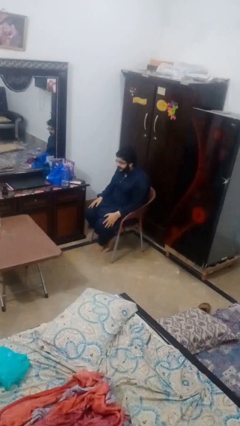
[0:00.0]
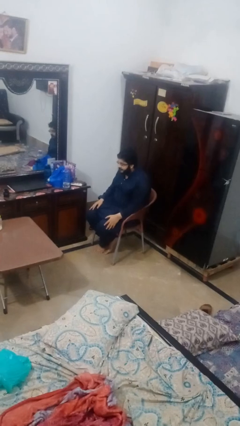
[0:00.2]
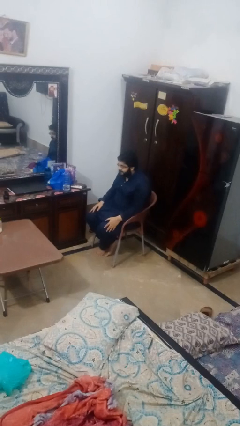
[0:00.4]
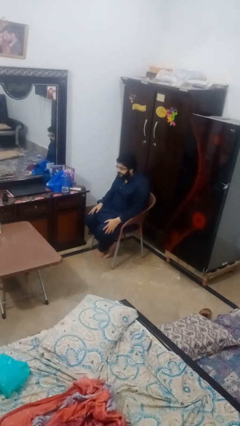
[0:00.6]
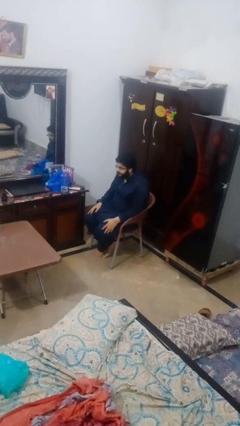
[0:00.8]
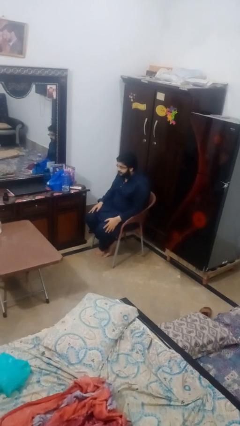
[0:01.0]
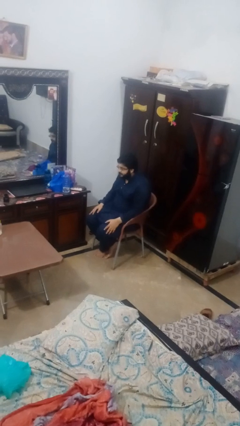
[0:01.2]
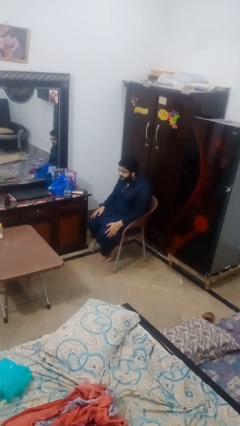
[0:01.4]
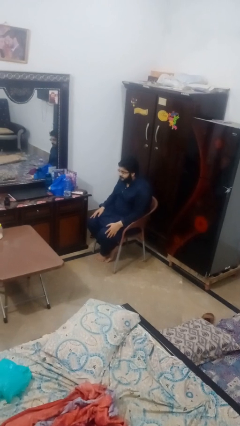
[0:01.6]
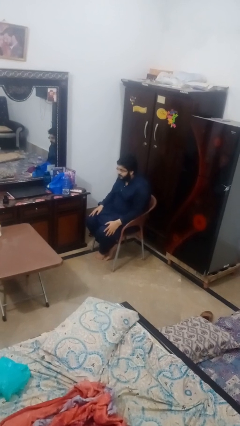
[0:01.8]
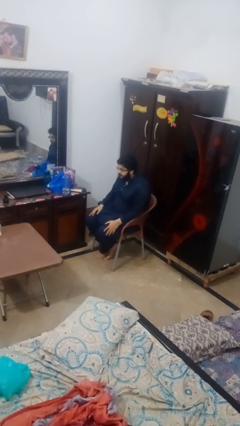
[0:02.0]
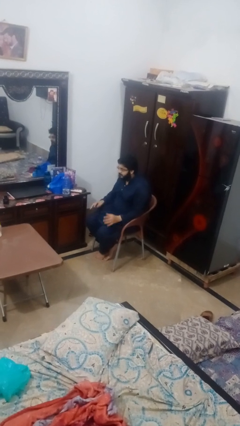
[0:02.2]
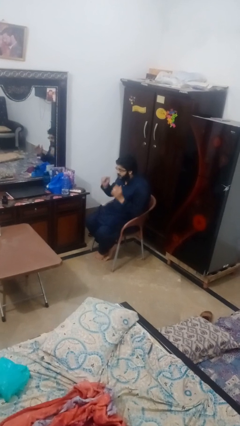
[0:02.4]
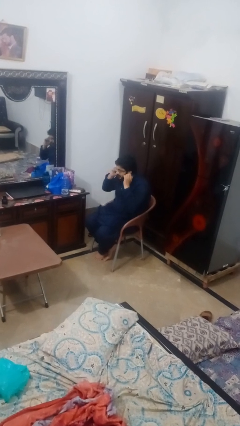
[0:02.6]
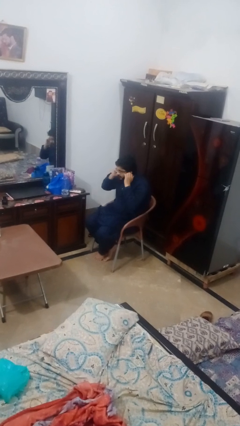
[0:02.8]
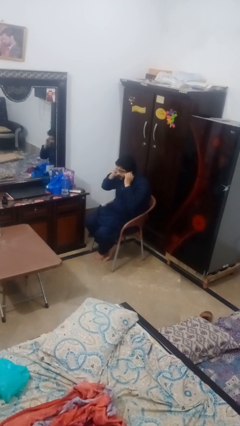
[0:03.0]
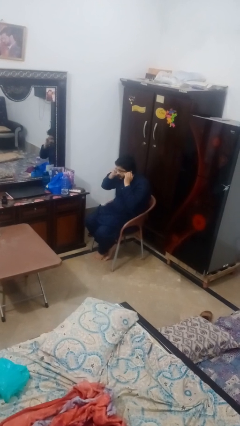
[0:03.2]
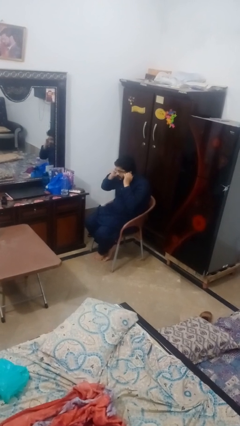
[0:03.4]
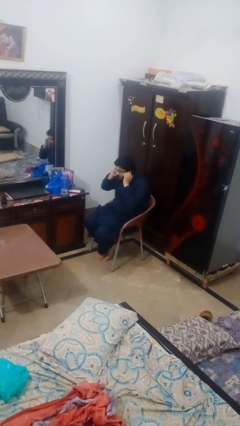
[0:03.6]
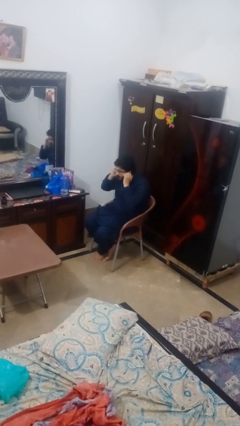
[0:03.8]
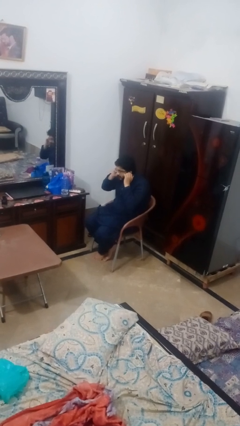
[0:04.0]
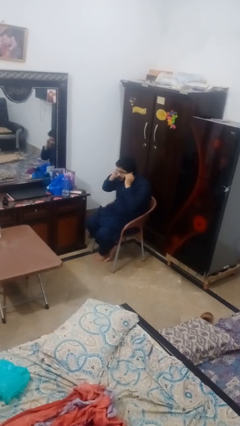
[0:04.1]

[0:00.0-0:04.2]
person puts fingers in ear

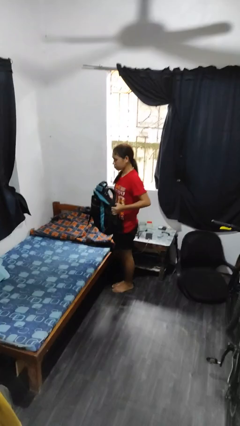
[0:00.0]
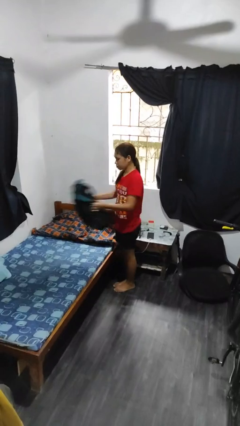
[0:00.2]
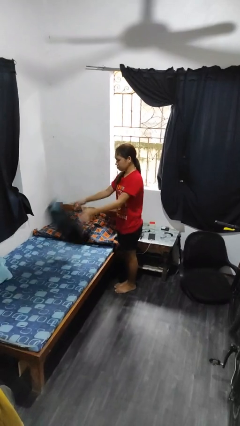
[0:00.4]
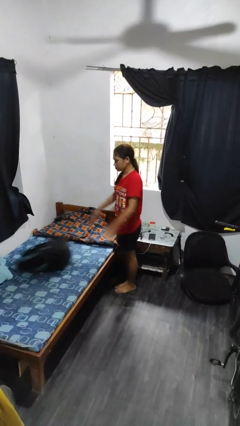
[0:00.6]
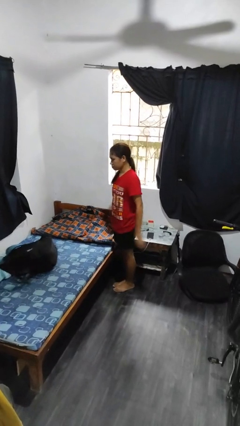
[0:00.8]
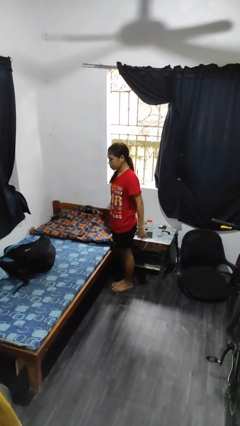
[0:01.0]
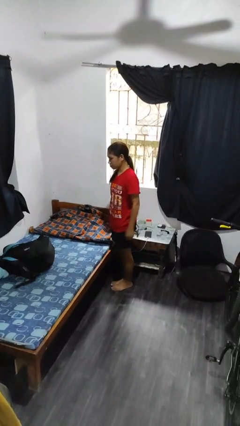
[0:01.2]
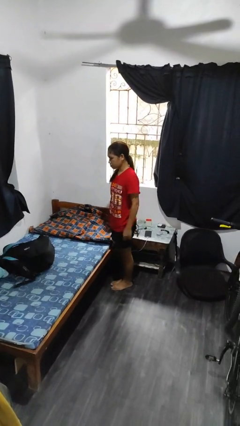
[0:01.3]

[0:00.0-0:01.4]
person throws object on bed

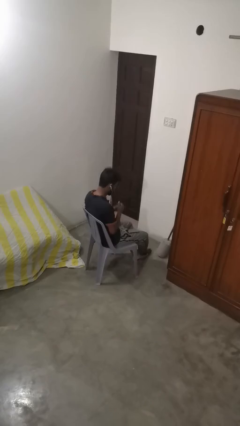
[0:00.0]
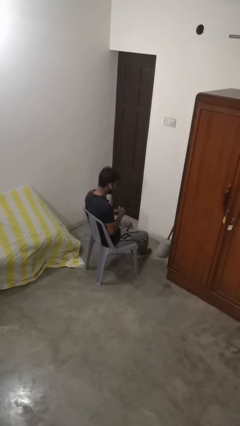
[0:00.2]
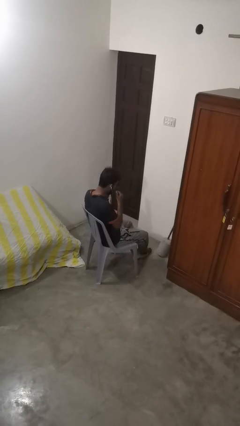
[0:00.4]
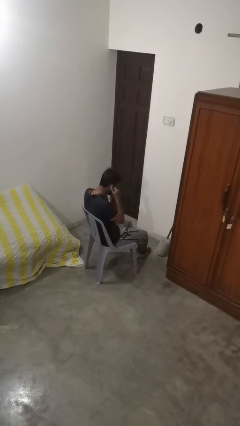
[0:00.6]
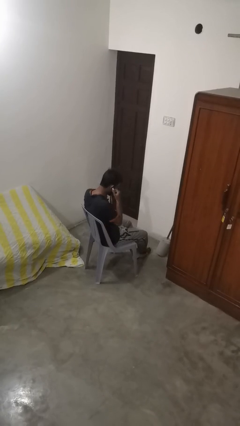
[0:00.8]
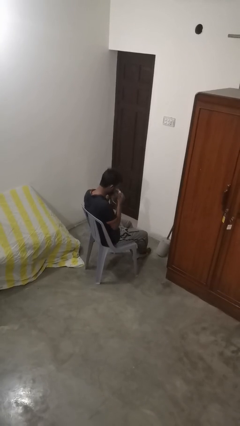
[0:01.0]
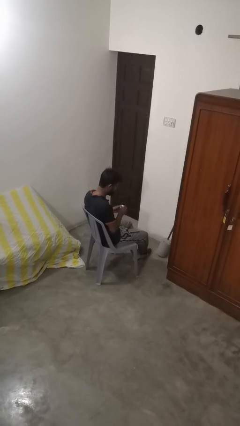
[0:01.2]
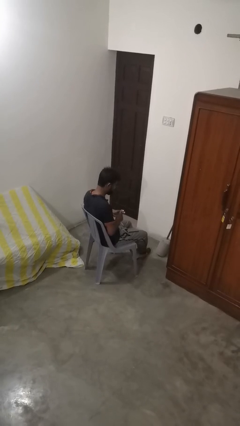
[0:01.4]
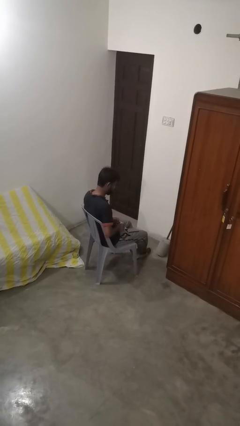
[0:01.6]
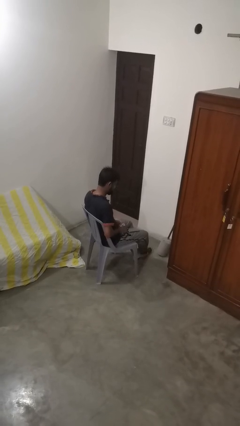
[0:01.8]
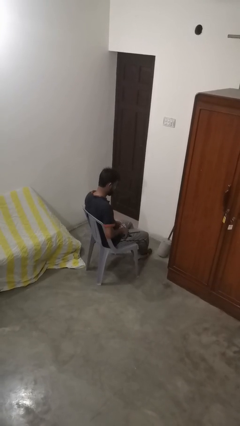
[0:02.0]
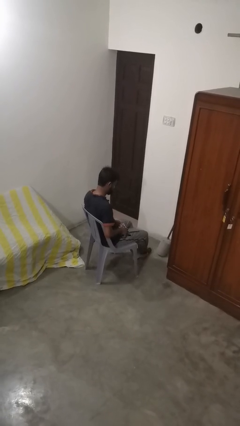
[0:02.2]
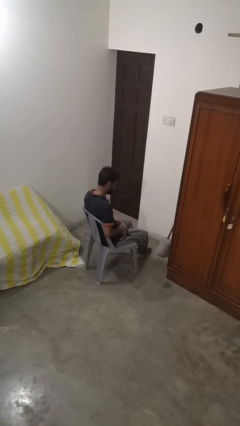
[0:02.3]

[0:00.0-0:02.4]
person takes off headphones

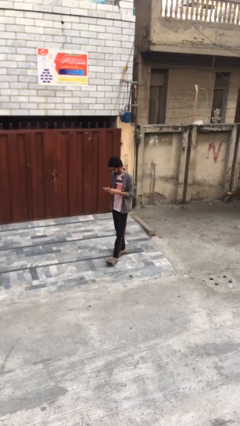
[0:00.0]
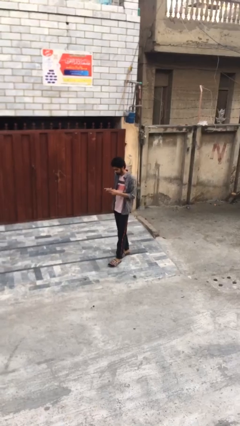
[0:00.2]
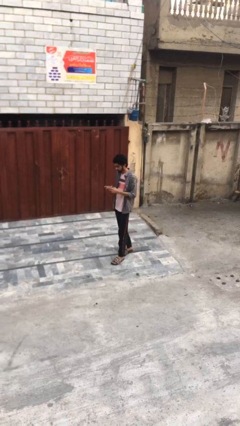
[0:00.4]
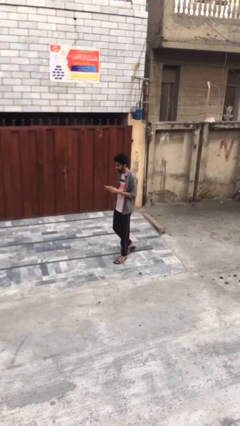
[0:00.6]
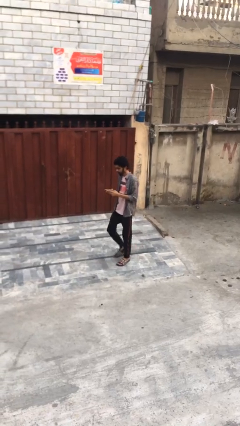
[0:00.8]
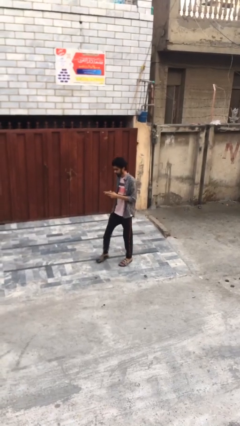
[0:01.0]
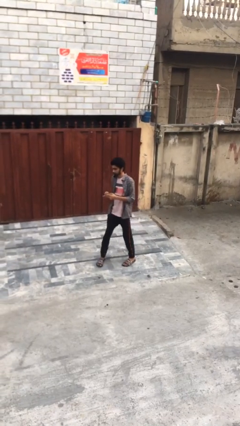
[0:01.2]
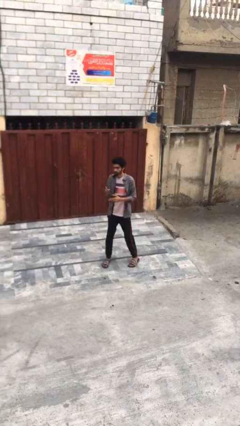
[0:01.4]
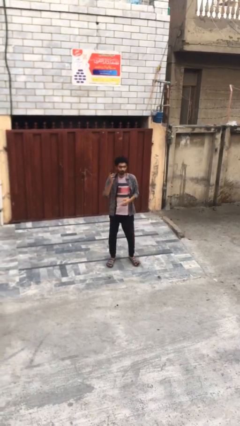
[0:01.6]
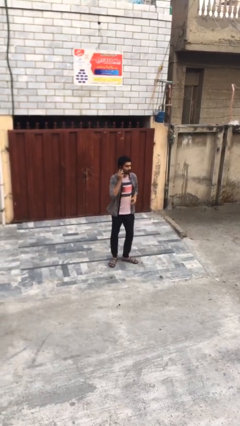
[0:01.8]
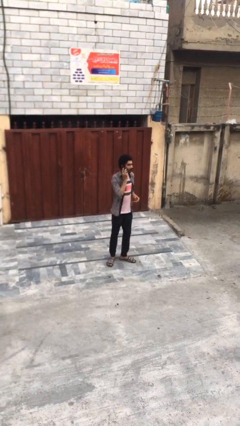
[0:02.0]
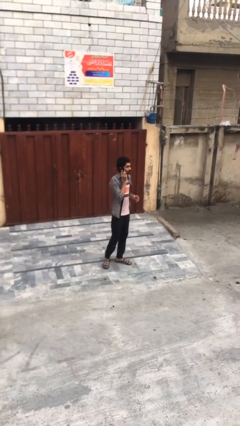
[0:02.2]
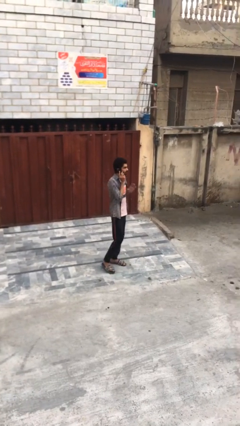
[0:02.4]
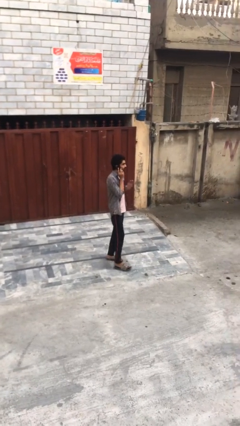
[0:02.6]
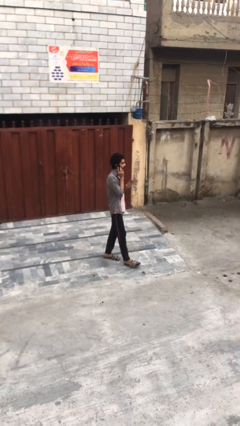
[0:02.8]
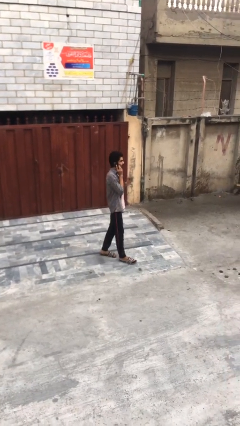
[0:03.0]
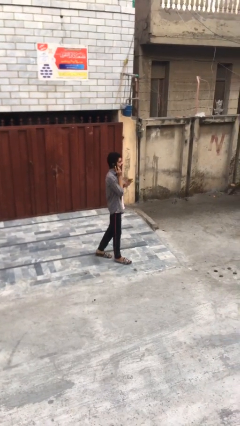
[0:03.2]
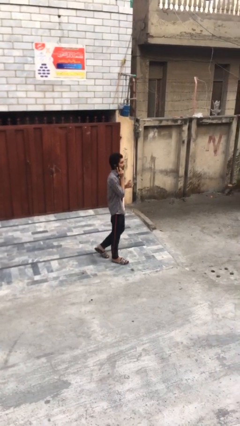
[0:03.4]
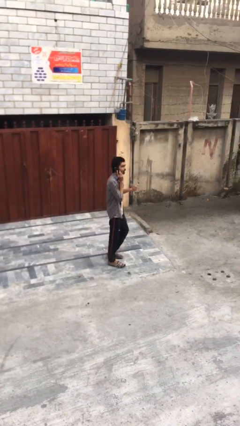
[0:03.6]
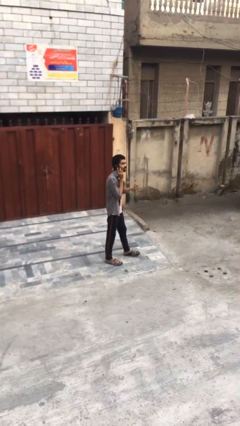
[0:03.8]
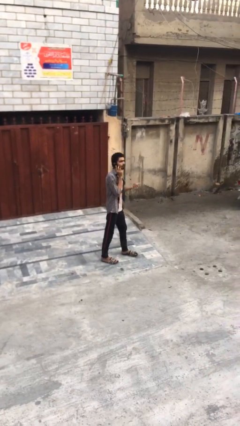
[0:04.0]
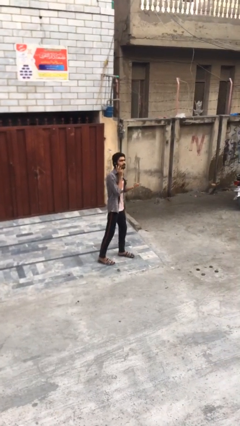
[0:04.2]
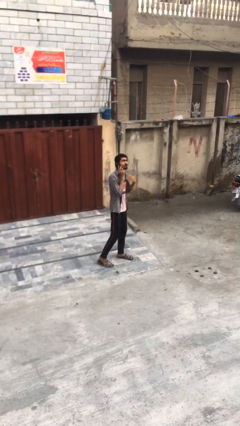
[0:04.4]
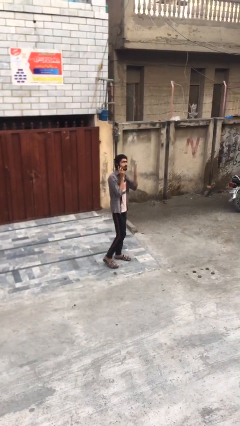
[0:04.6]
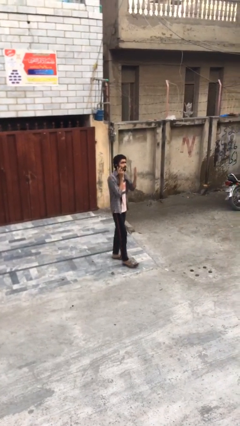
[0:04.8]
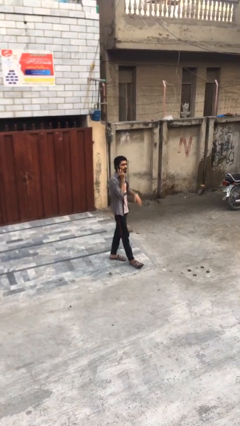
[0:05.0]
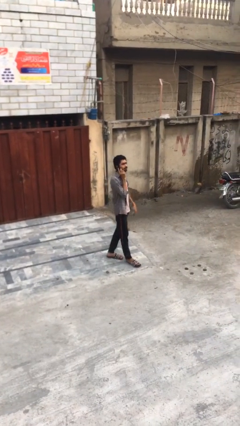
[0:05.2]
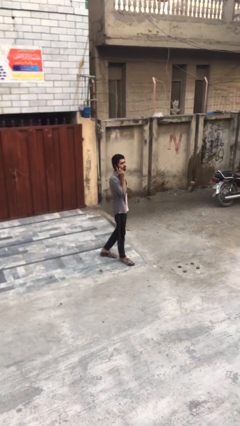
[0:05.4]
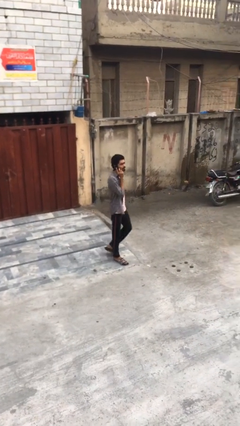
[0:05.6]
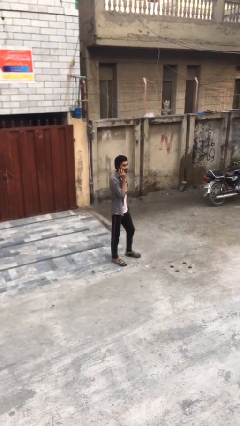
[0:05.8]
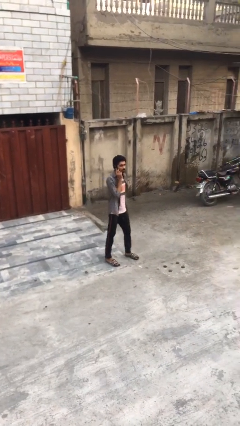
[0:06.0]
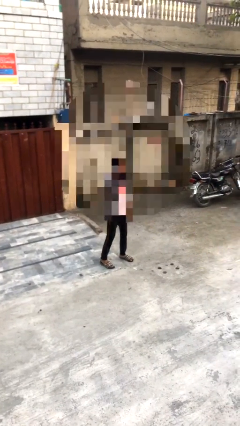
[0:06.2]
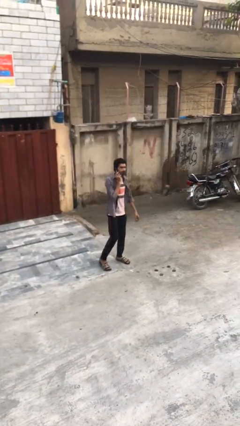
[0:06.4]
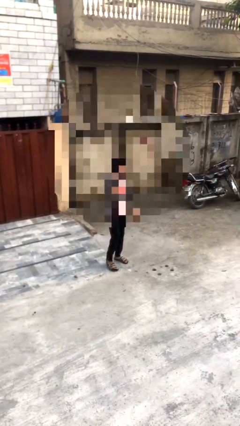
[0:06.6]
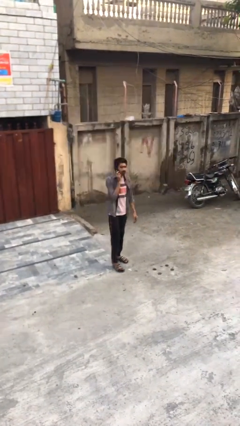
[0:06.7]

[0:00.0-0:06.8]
person talks on phone

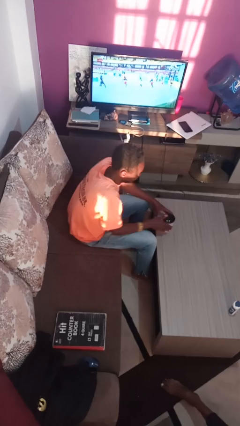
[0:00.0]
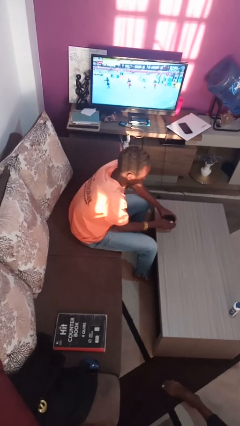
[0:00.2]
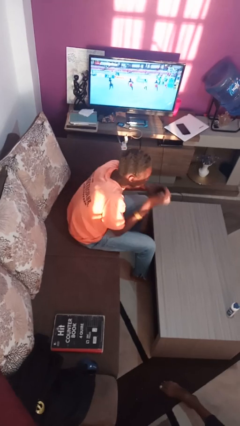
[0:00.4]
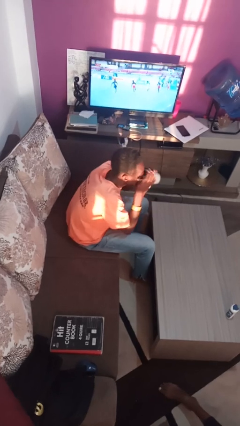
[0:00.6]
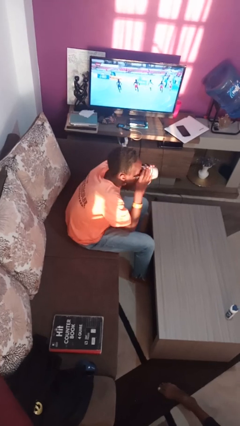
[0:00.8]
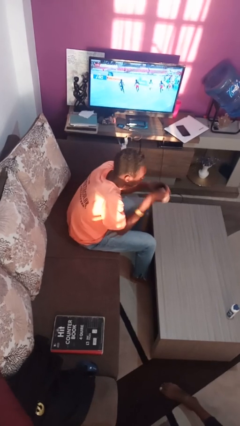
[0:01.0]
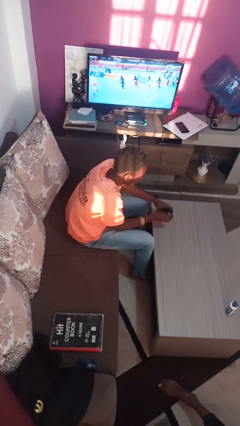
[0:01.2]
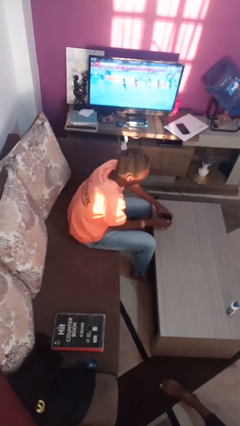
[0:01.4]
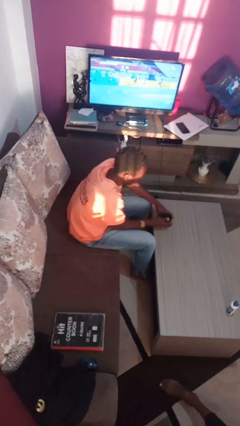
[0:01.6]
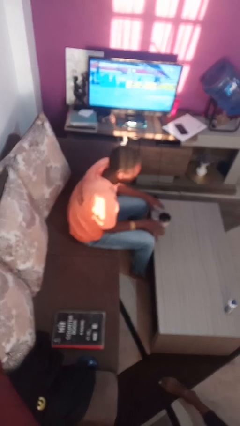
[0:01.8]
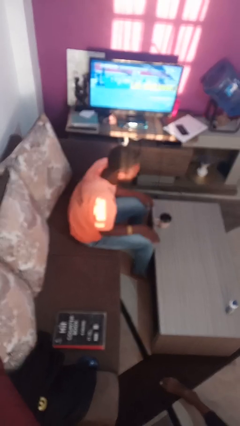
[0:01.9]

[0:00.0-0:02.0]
person drinks from mug

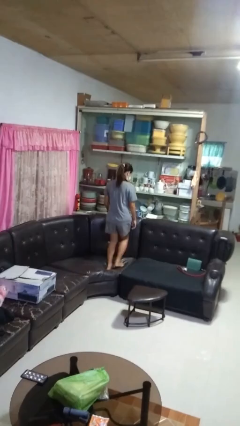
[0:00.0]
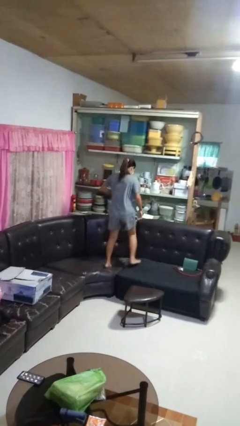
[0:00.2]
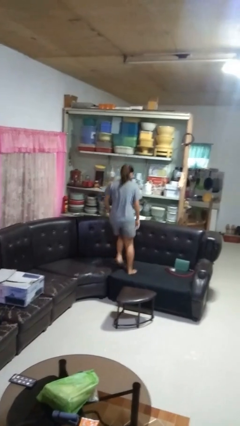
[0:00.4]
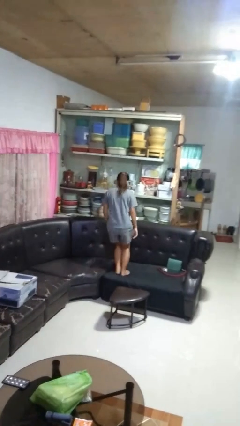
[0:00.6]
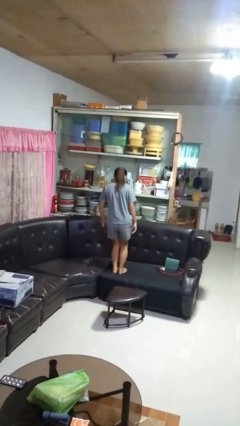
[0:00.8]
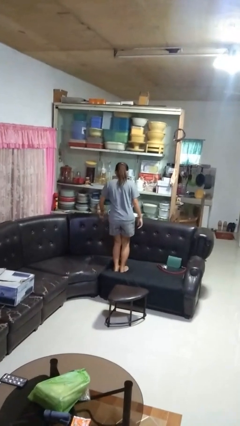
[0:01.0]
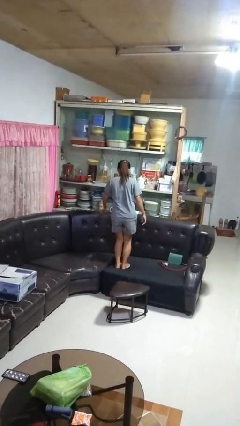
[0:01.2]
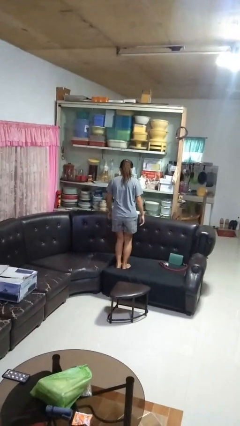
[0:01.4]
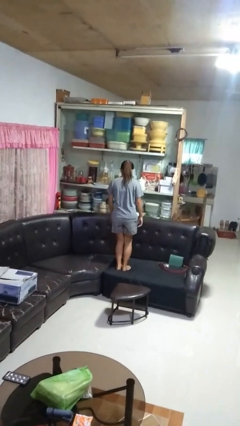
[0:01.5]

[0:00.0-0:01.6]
person jumps on couch
